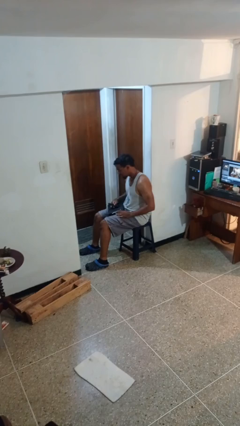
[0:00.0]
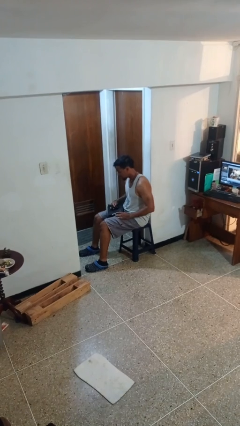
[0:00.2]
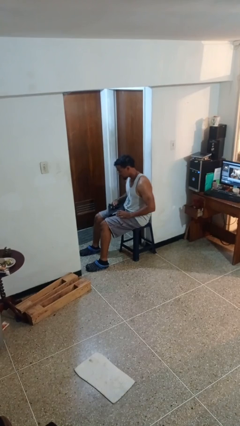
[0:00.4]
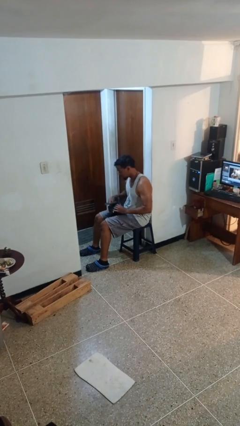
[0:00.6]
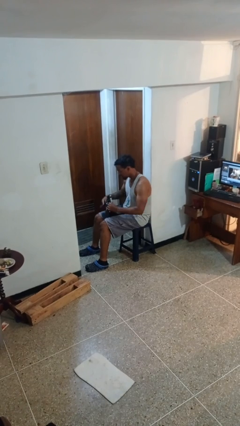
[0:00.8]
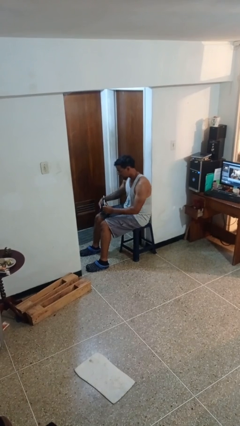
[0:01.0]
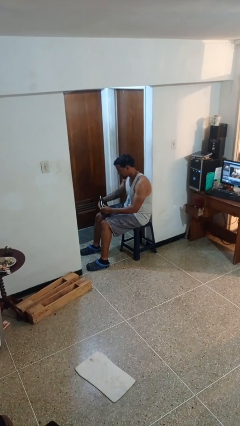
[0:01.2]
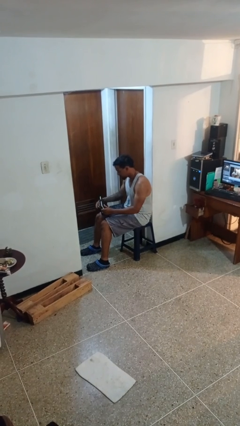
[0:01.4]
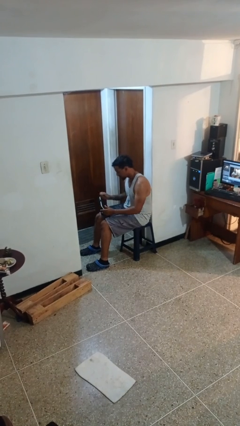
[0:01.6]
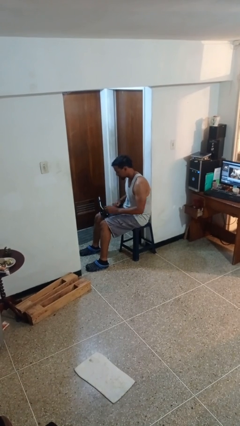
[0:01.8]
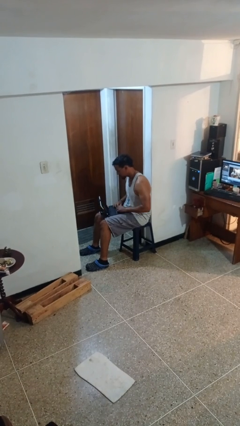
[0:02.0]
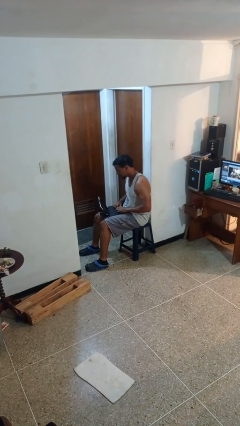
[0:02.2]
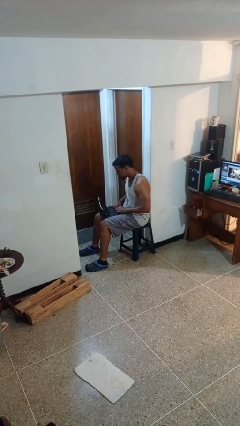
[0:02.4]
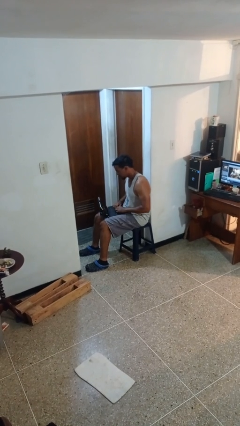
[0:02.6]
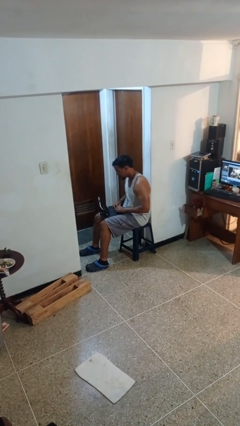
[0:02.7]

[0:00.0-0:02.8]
person opens laptop

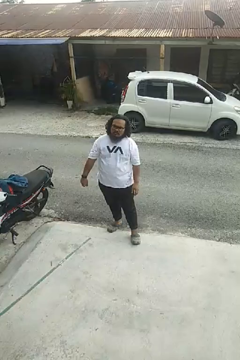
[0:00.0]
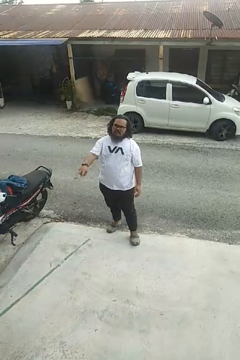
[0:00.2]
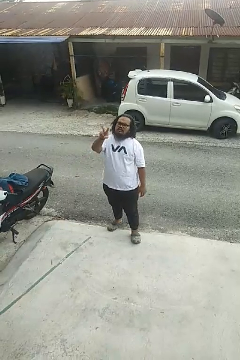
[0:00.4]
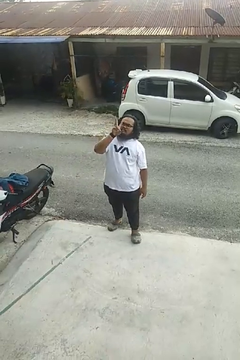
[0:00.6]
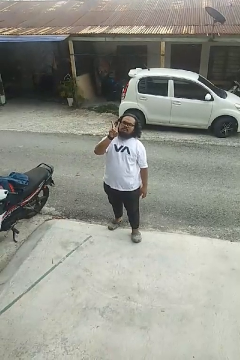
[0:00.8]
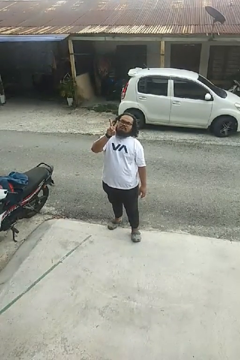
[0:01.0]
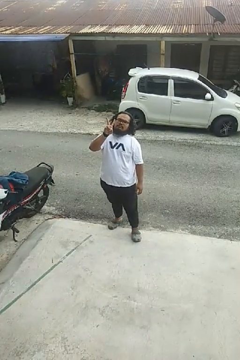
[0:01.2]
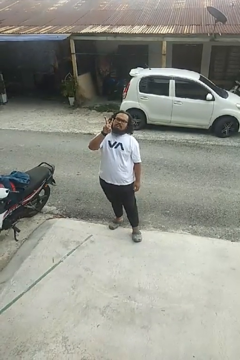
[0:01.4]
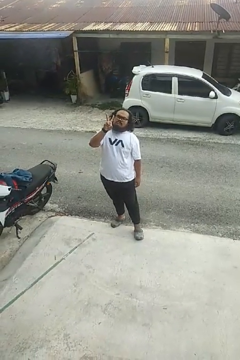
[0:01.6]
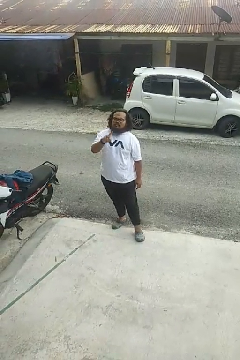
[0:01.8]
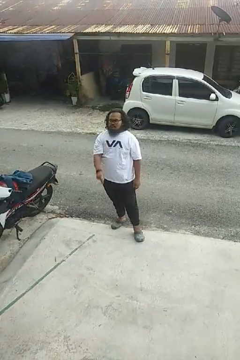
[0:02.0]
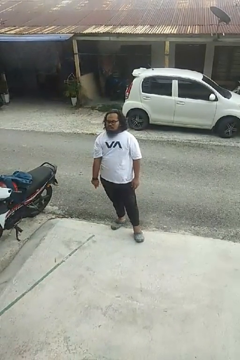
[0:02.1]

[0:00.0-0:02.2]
person gestures peace

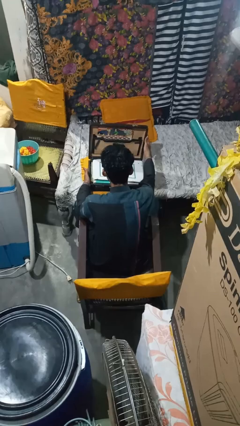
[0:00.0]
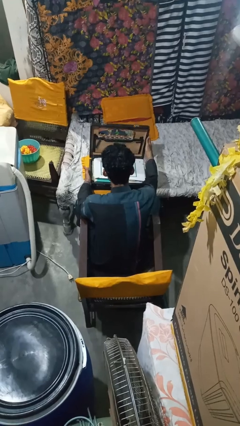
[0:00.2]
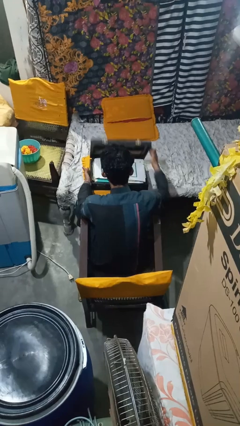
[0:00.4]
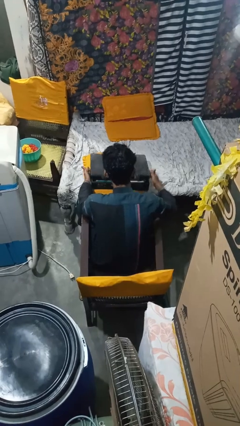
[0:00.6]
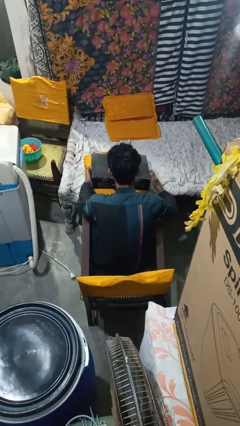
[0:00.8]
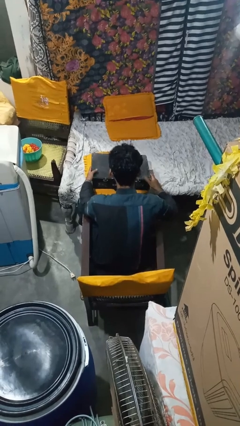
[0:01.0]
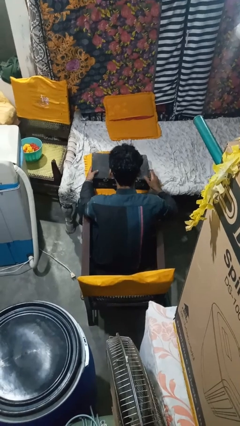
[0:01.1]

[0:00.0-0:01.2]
person closes suitcase

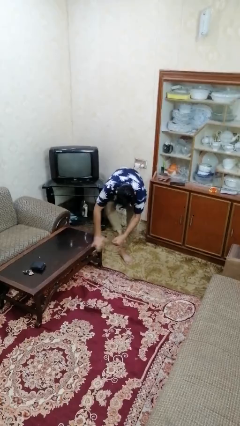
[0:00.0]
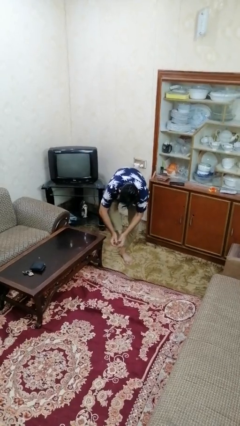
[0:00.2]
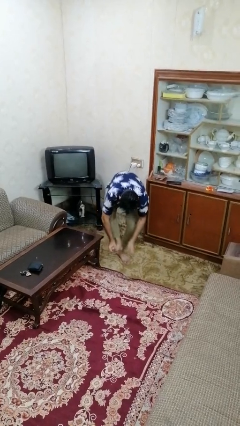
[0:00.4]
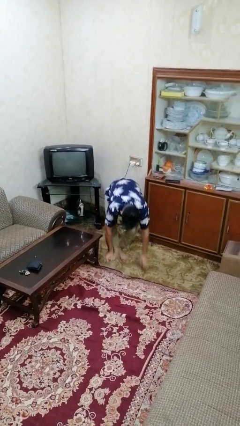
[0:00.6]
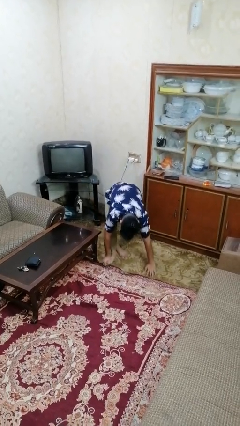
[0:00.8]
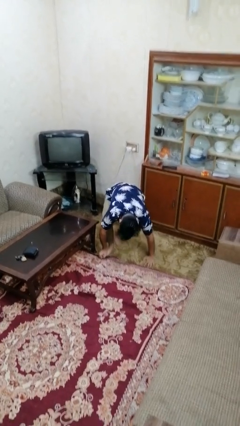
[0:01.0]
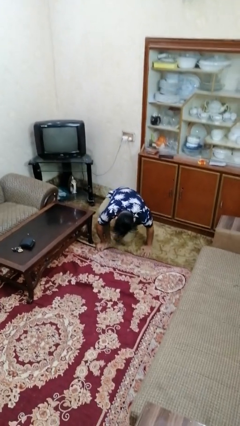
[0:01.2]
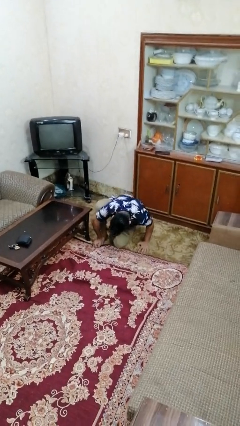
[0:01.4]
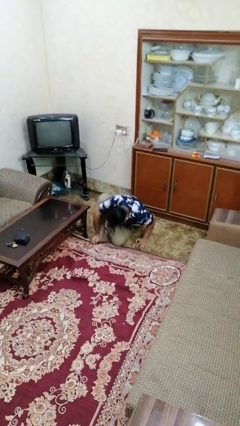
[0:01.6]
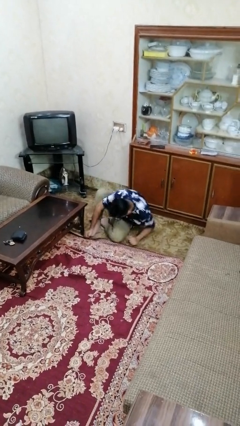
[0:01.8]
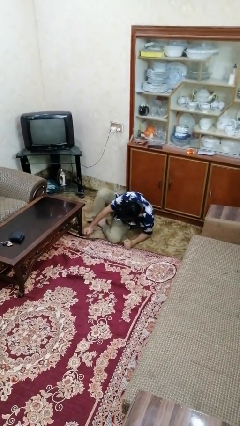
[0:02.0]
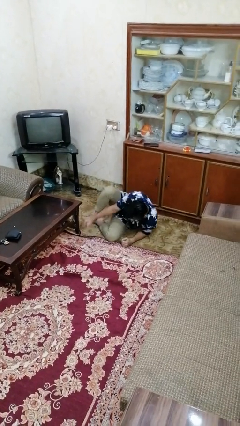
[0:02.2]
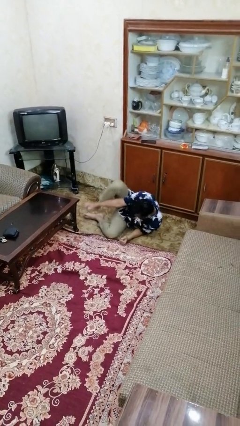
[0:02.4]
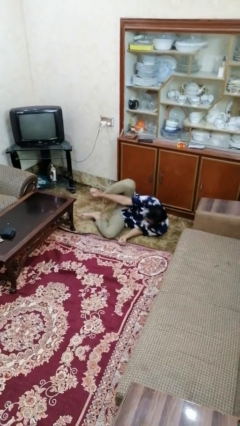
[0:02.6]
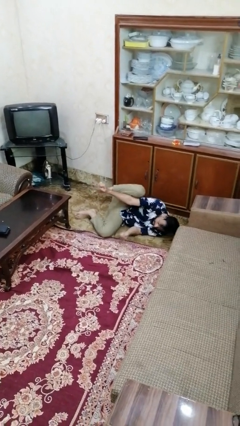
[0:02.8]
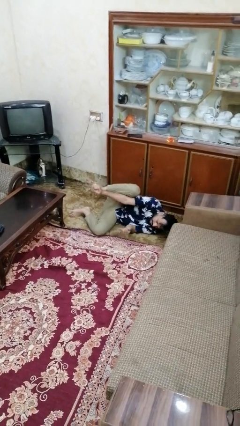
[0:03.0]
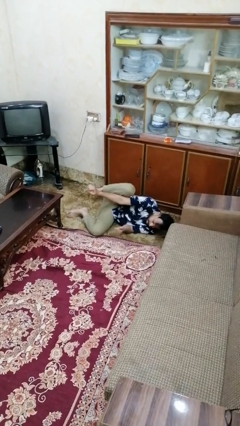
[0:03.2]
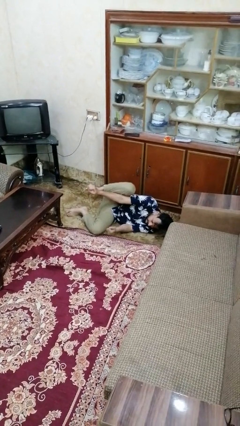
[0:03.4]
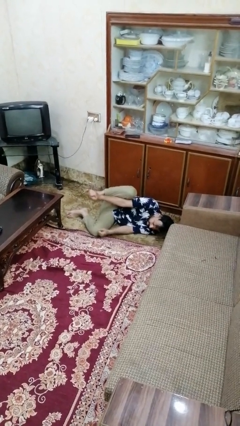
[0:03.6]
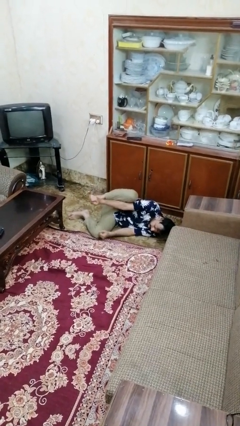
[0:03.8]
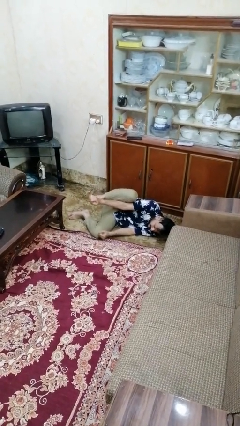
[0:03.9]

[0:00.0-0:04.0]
person lies down on floor

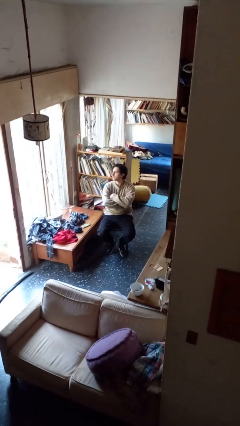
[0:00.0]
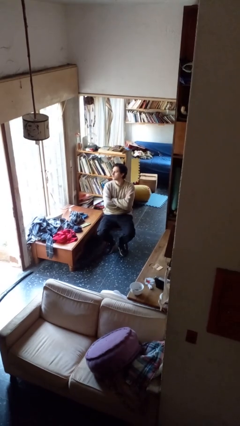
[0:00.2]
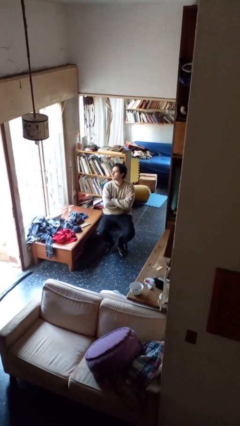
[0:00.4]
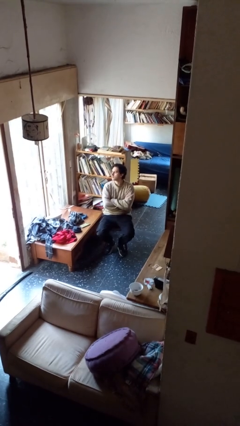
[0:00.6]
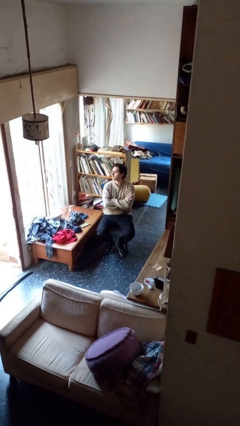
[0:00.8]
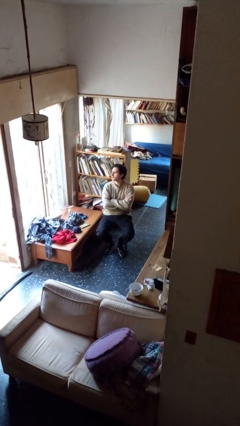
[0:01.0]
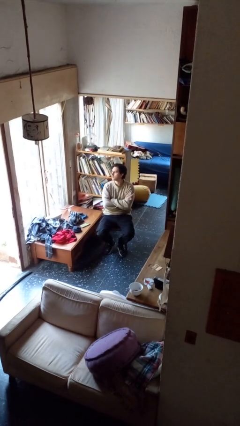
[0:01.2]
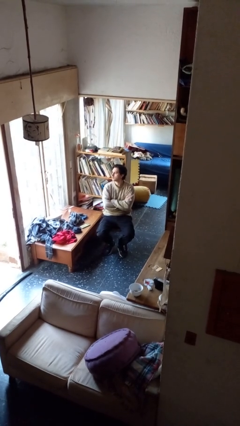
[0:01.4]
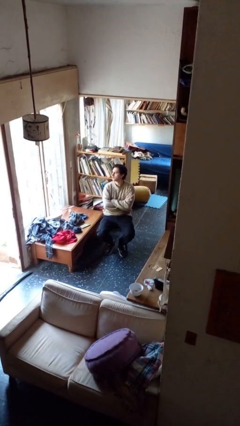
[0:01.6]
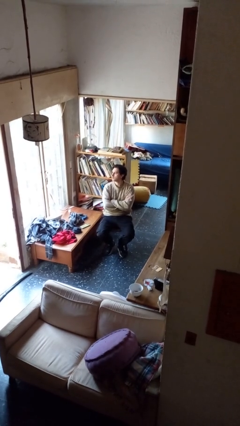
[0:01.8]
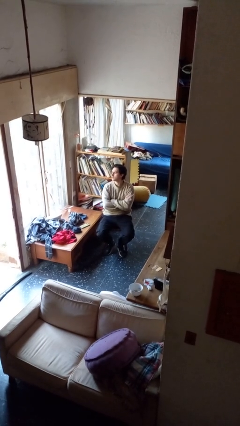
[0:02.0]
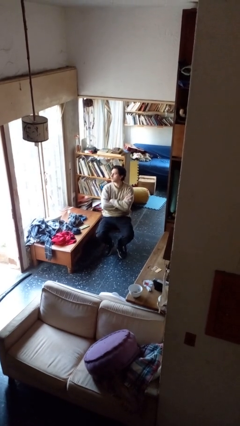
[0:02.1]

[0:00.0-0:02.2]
person crosses arms

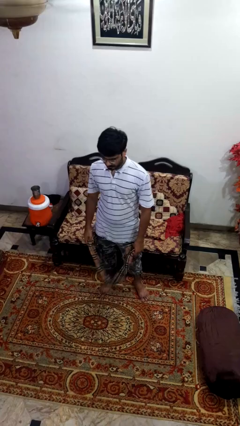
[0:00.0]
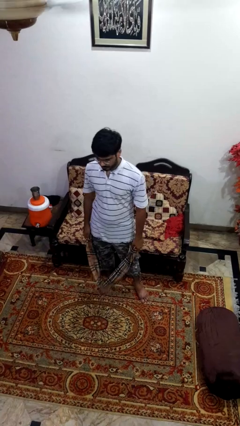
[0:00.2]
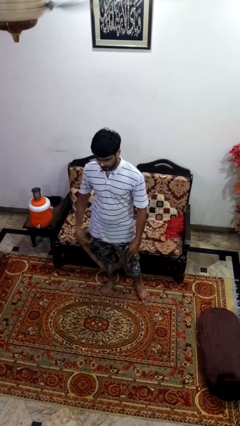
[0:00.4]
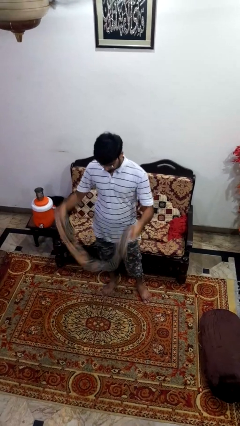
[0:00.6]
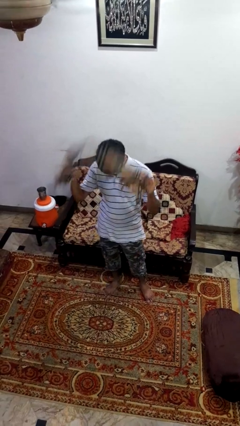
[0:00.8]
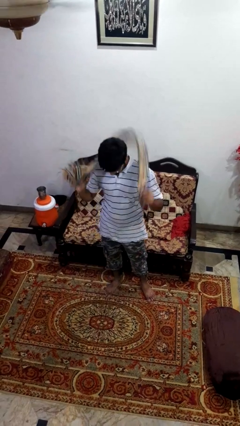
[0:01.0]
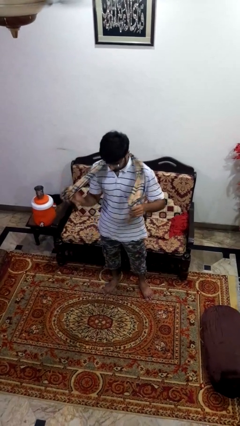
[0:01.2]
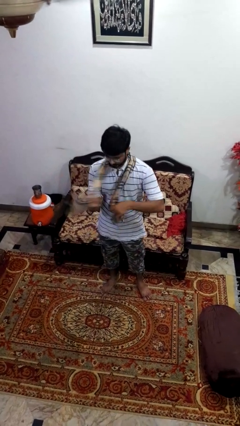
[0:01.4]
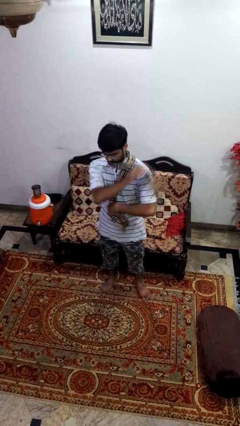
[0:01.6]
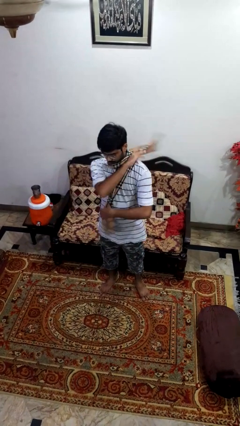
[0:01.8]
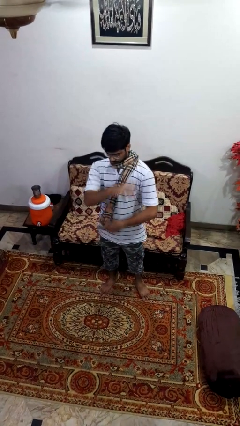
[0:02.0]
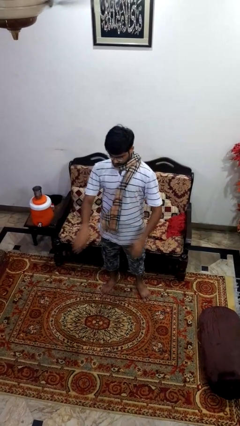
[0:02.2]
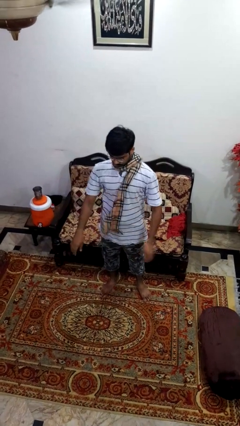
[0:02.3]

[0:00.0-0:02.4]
person puts on scarf

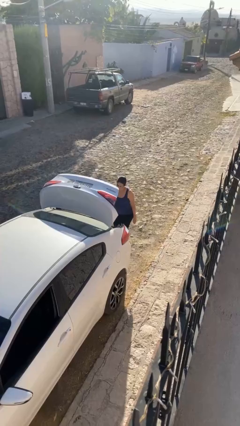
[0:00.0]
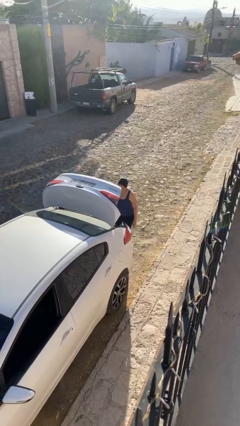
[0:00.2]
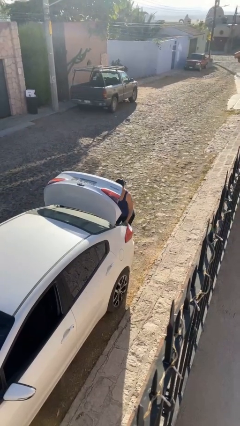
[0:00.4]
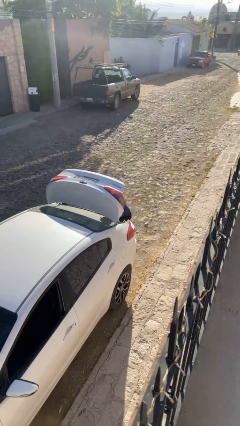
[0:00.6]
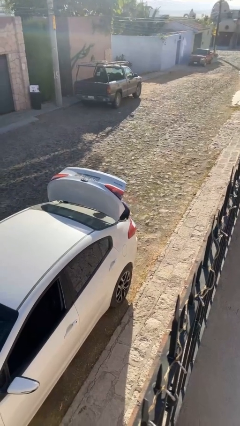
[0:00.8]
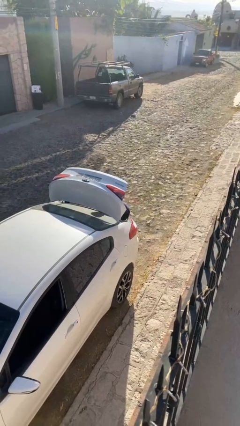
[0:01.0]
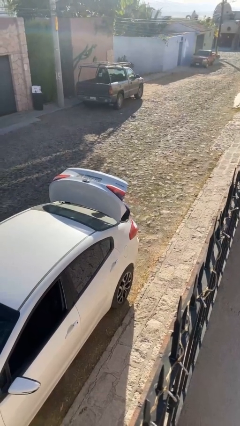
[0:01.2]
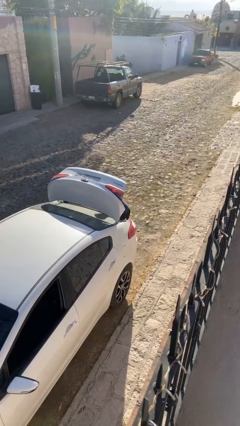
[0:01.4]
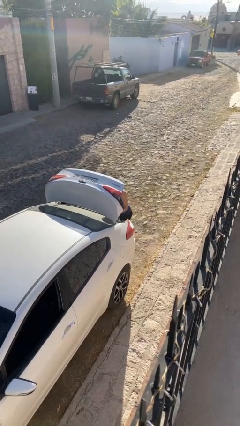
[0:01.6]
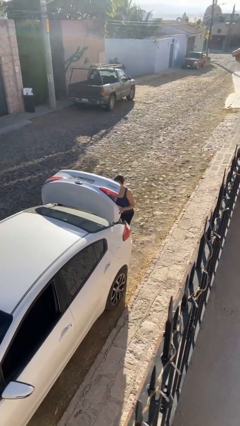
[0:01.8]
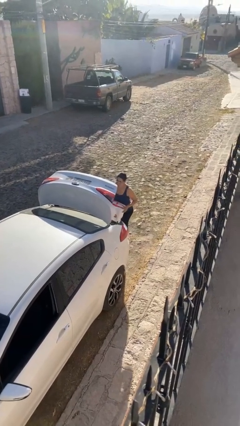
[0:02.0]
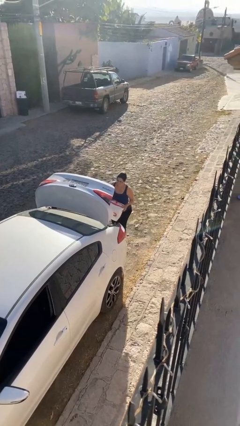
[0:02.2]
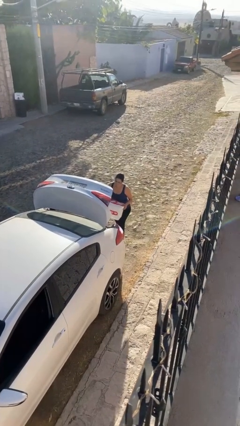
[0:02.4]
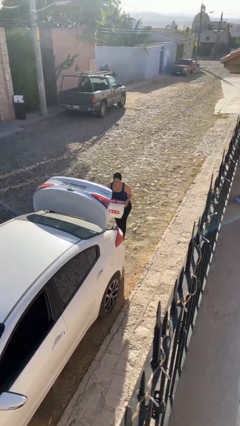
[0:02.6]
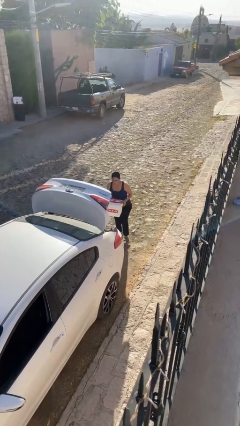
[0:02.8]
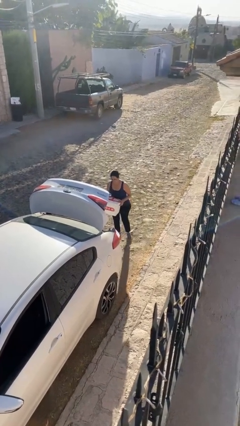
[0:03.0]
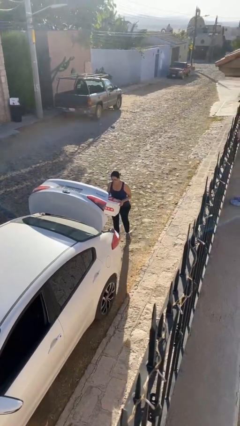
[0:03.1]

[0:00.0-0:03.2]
person unloads car
